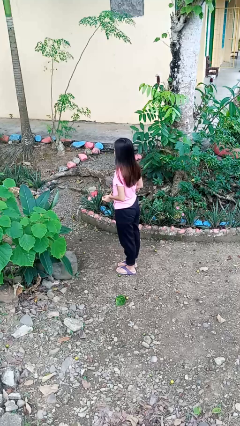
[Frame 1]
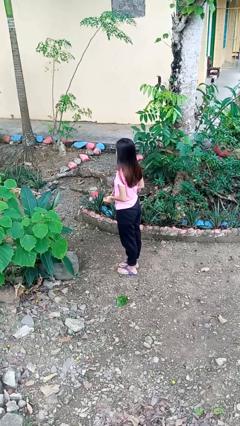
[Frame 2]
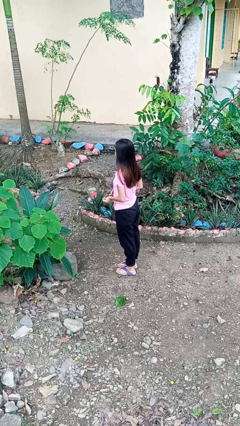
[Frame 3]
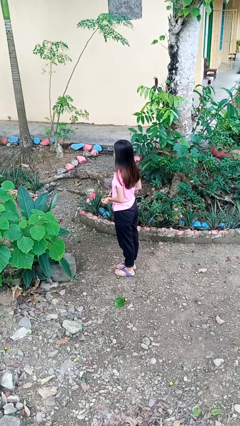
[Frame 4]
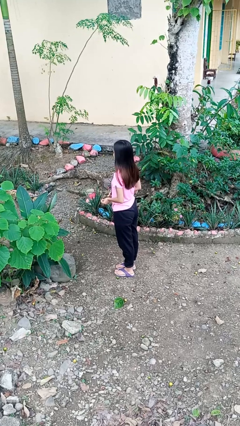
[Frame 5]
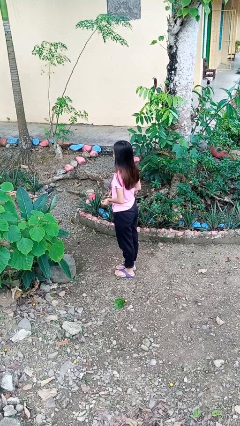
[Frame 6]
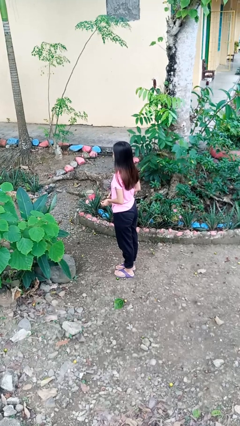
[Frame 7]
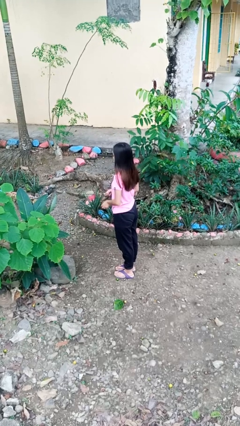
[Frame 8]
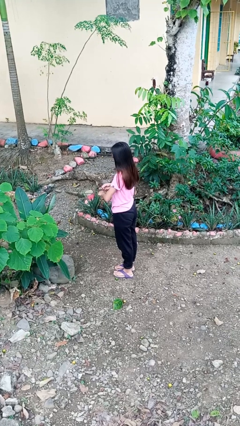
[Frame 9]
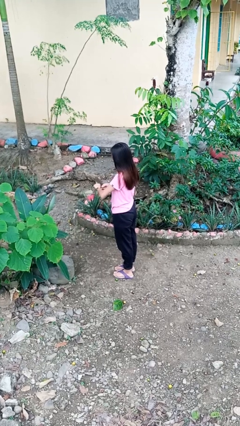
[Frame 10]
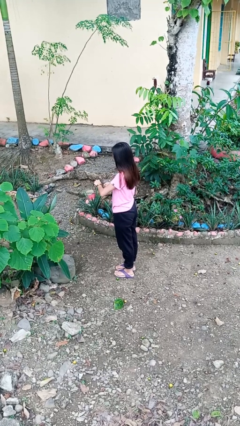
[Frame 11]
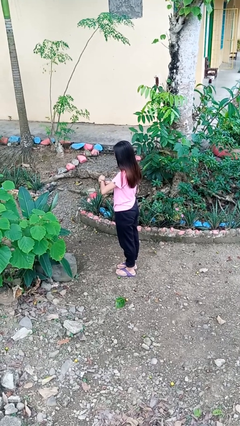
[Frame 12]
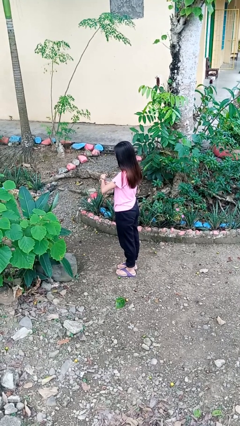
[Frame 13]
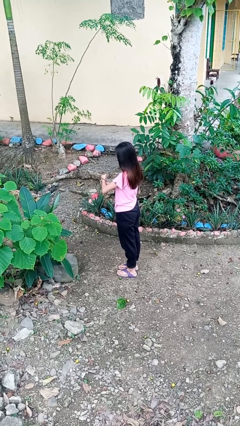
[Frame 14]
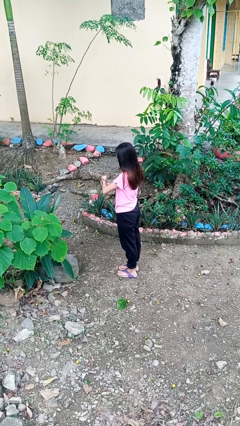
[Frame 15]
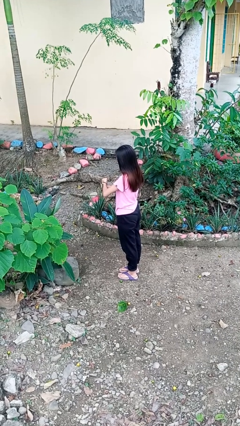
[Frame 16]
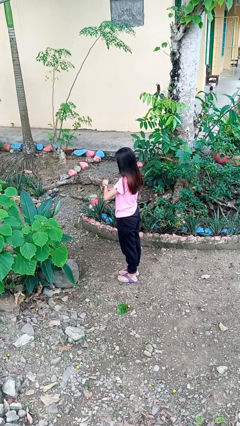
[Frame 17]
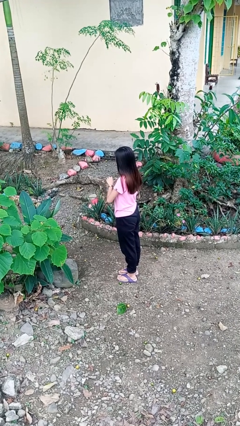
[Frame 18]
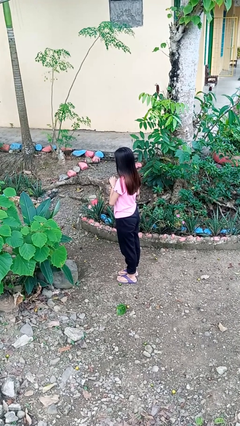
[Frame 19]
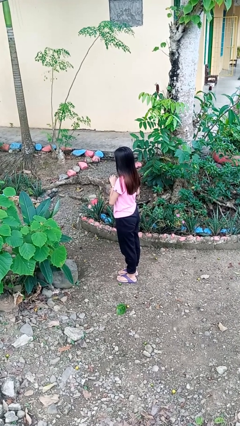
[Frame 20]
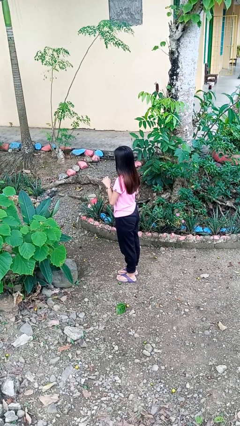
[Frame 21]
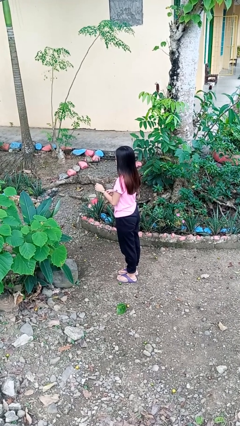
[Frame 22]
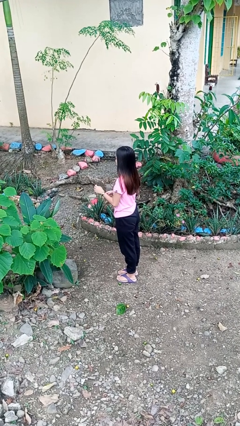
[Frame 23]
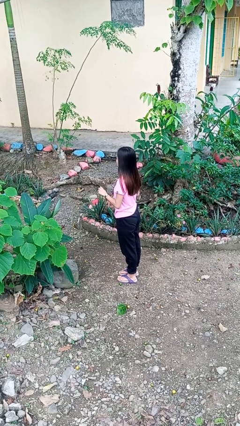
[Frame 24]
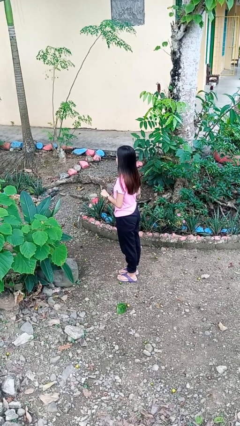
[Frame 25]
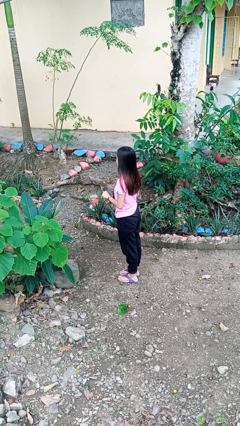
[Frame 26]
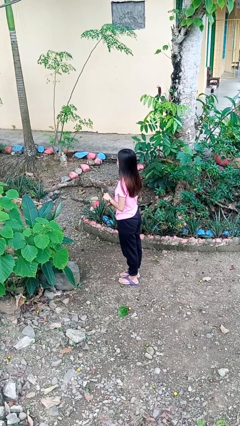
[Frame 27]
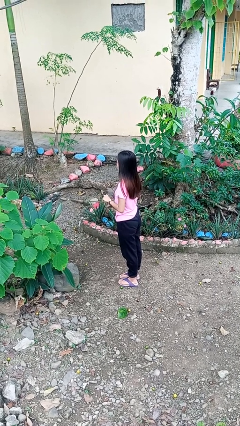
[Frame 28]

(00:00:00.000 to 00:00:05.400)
person puts on wristwatch

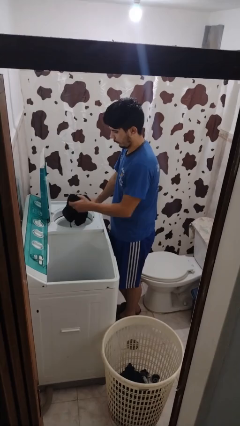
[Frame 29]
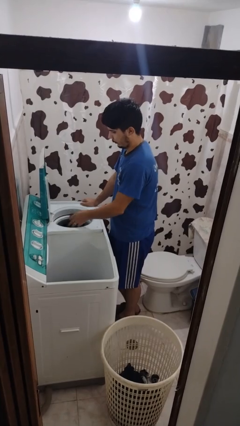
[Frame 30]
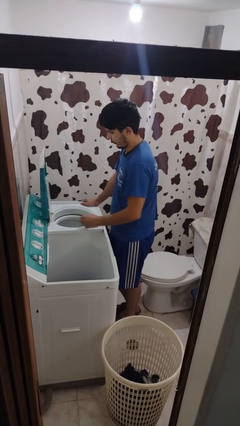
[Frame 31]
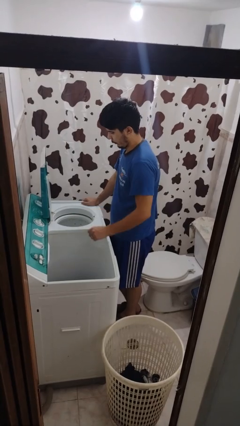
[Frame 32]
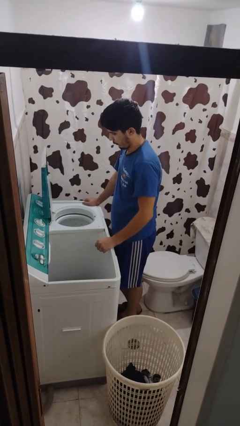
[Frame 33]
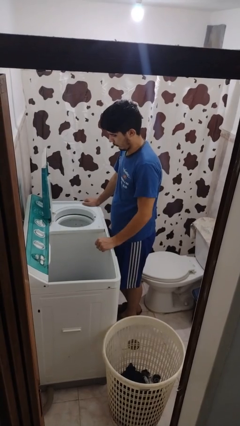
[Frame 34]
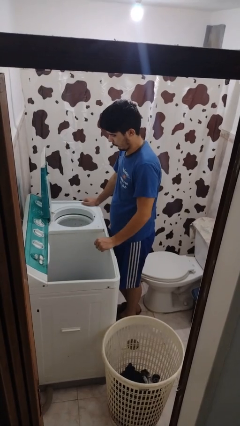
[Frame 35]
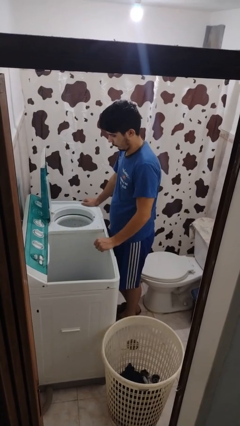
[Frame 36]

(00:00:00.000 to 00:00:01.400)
person loads dryer

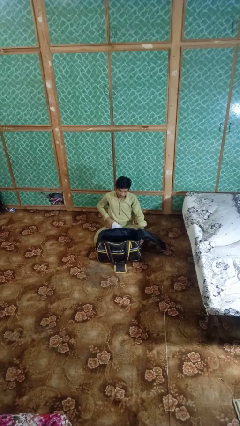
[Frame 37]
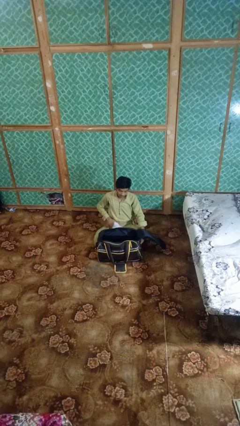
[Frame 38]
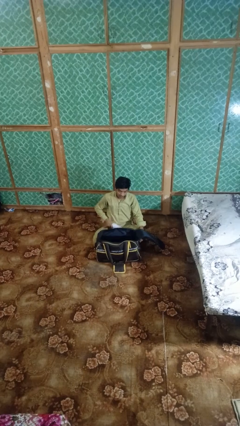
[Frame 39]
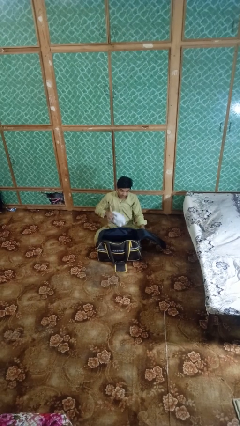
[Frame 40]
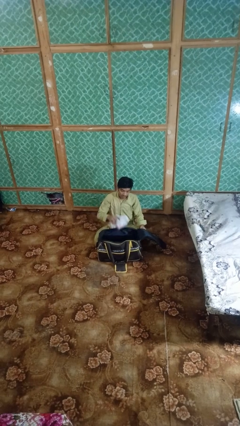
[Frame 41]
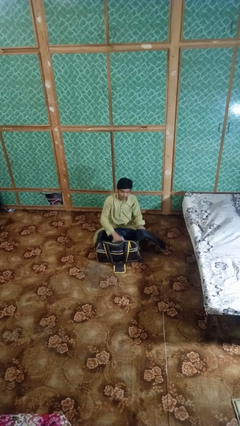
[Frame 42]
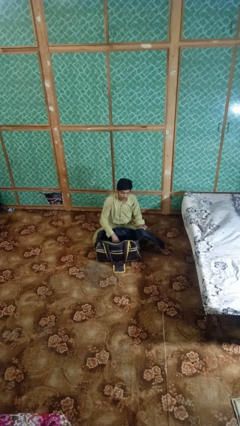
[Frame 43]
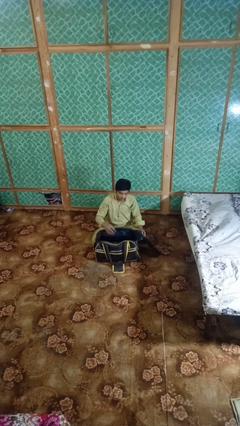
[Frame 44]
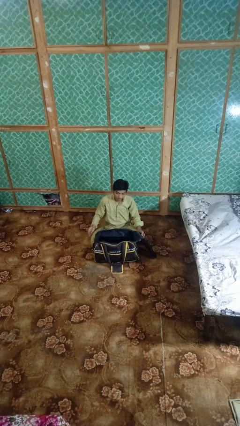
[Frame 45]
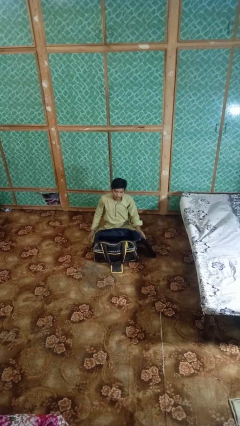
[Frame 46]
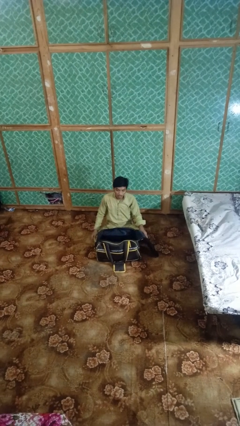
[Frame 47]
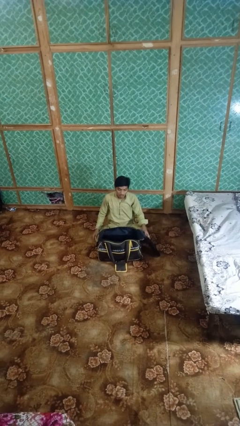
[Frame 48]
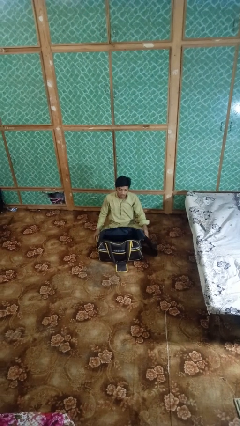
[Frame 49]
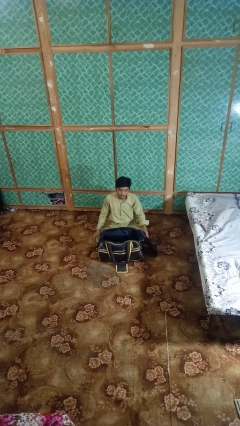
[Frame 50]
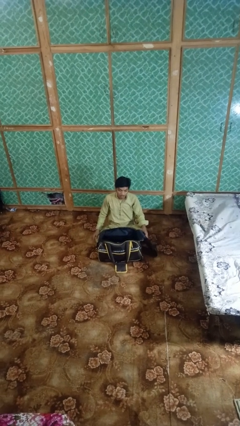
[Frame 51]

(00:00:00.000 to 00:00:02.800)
person puts object into bag

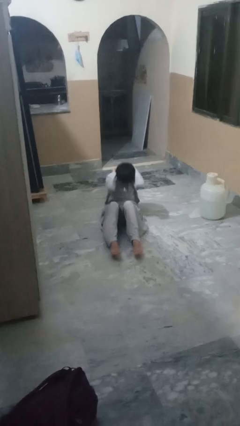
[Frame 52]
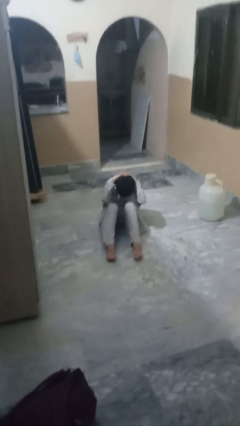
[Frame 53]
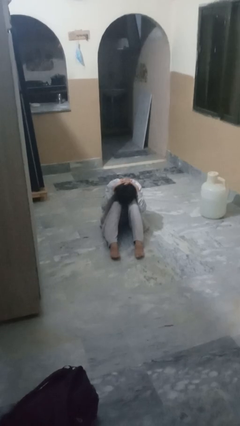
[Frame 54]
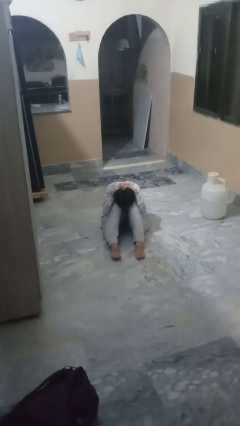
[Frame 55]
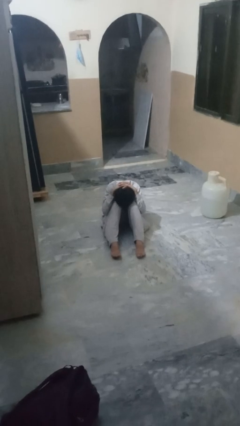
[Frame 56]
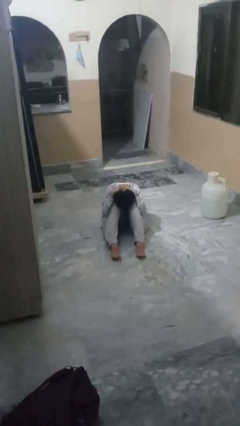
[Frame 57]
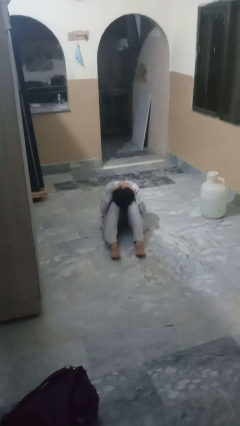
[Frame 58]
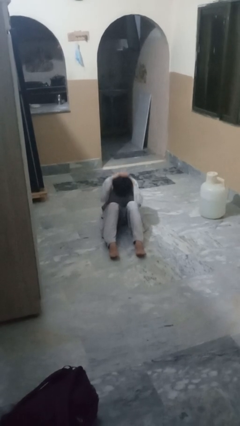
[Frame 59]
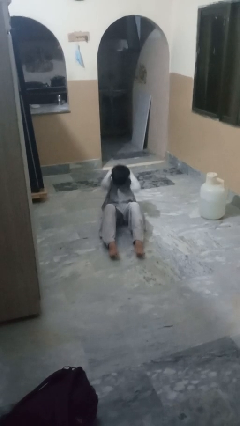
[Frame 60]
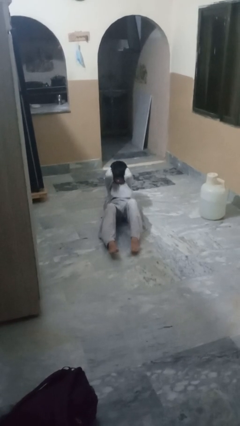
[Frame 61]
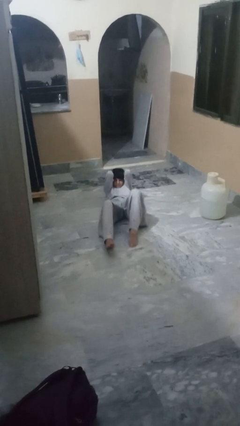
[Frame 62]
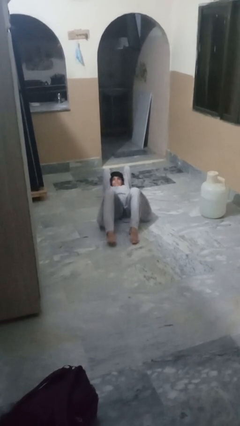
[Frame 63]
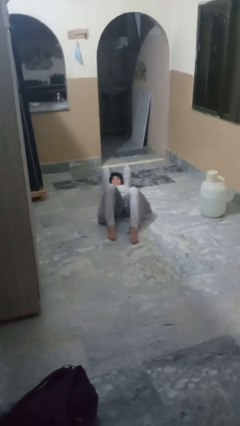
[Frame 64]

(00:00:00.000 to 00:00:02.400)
person exercises with situp

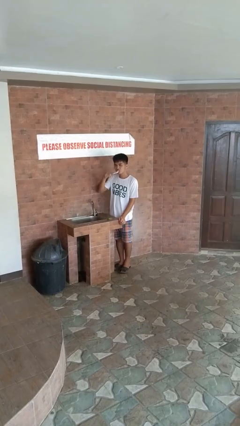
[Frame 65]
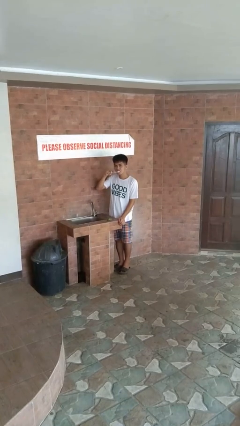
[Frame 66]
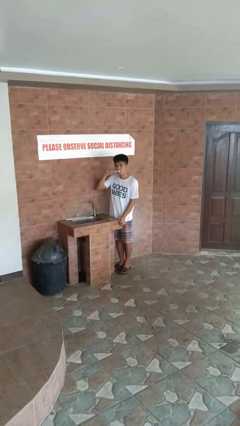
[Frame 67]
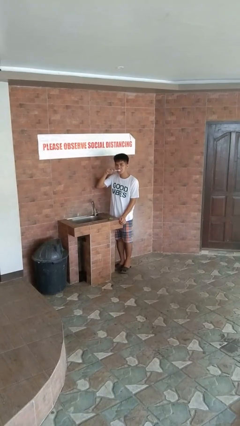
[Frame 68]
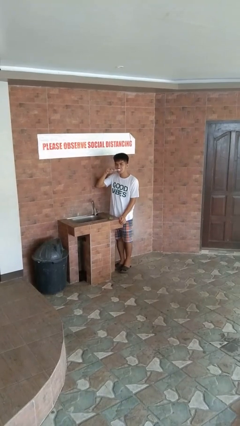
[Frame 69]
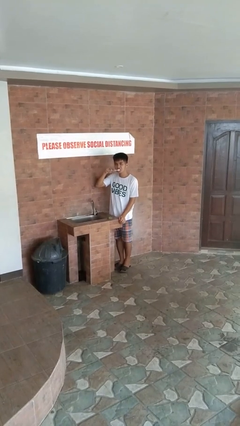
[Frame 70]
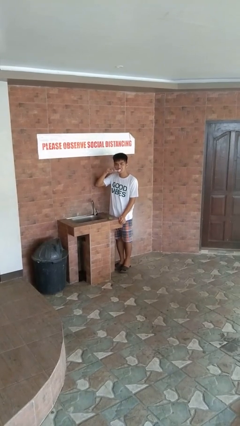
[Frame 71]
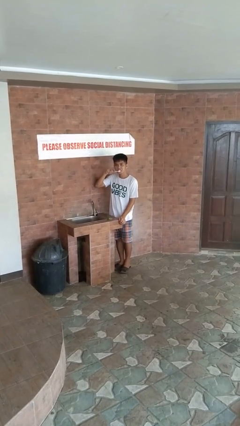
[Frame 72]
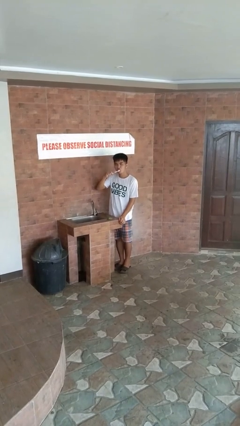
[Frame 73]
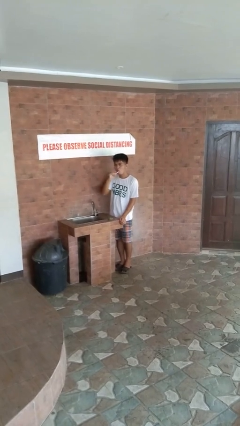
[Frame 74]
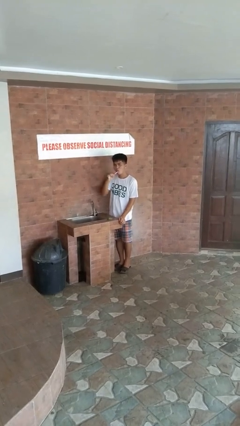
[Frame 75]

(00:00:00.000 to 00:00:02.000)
person brushes teeth

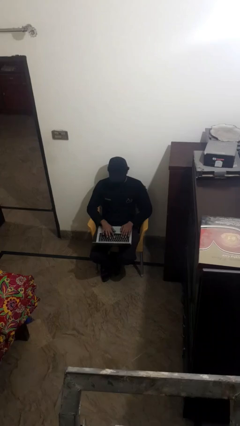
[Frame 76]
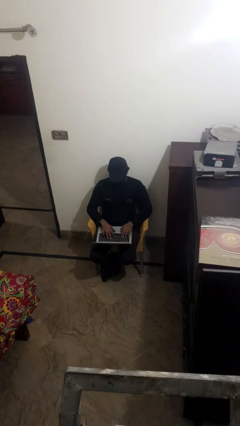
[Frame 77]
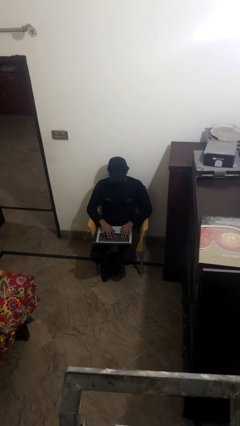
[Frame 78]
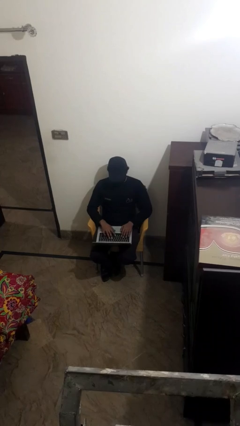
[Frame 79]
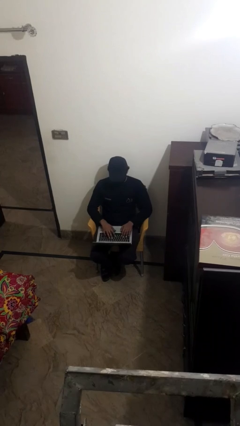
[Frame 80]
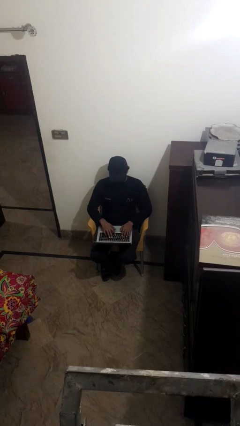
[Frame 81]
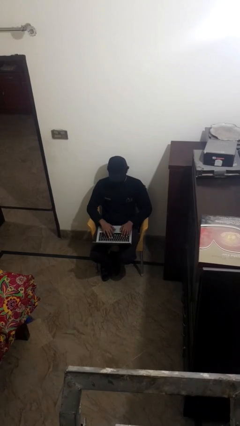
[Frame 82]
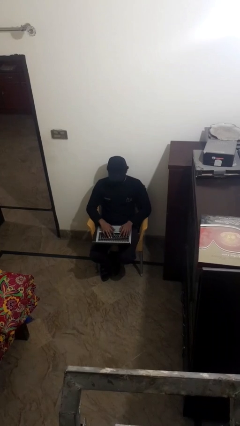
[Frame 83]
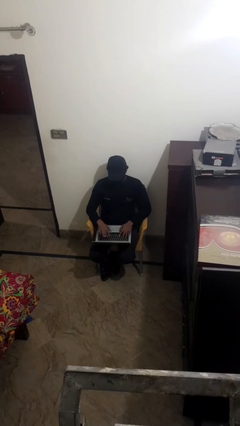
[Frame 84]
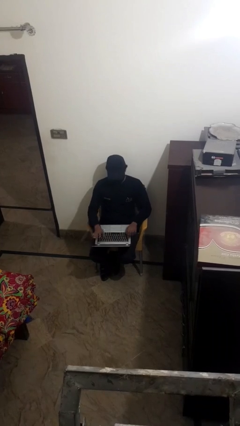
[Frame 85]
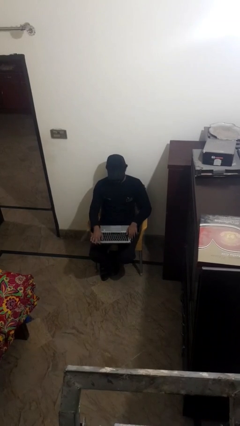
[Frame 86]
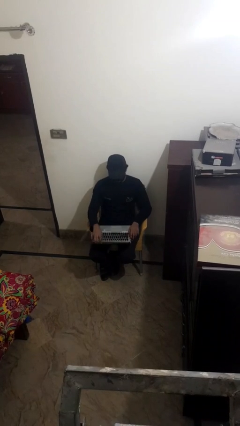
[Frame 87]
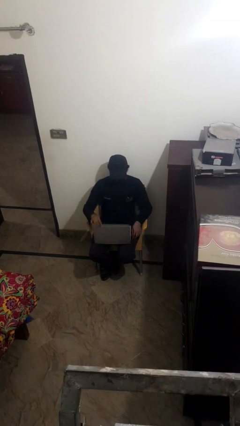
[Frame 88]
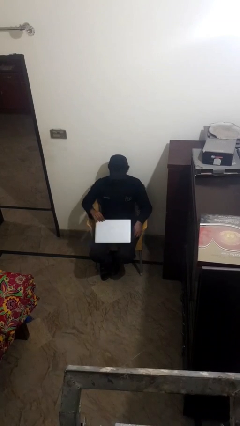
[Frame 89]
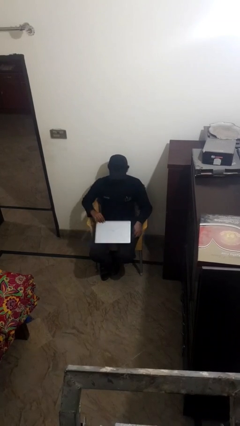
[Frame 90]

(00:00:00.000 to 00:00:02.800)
person interacts with laptop

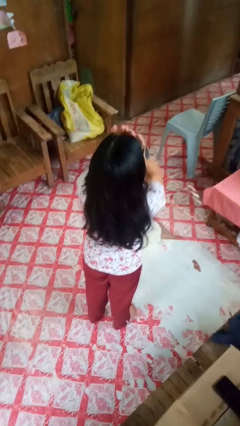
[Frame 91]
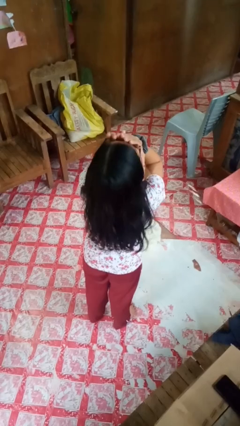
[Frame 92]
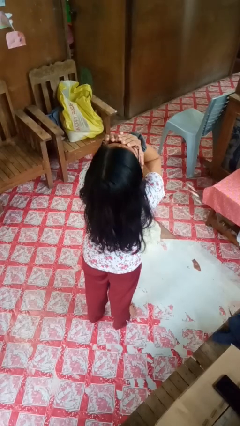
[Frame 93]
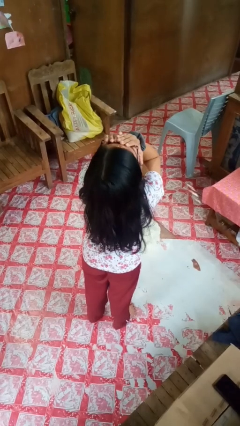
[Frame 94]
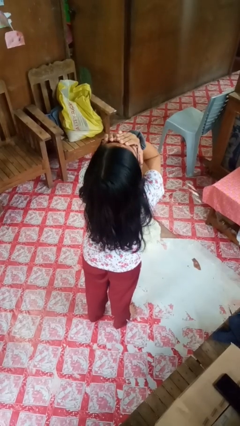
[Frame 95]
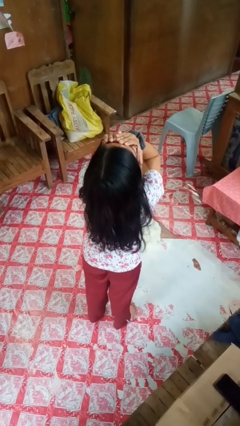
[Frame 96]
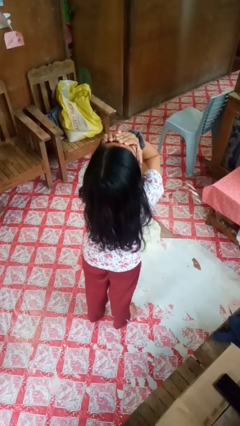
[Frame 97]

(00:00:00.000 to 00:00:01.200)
person covers face with hands
